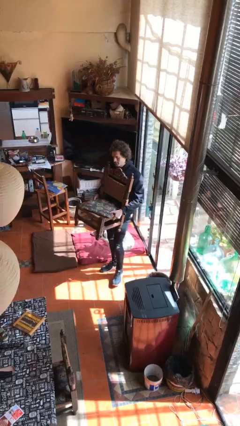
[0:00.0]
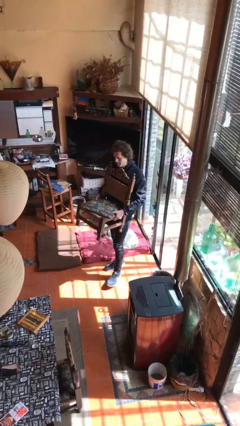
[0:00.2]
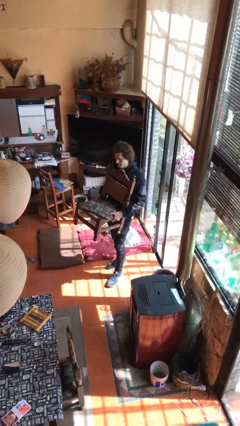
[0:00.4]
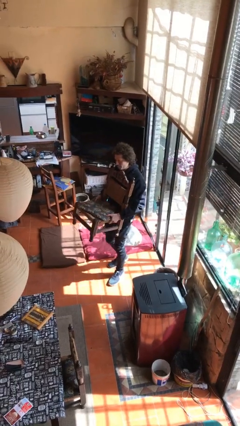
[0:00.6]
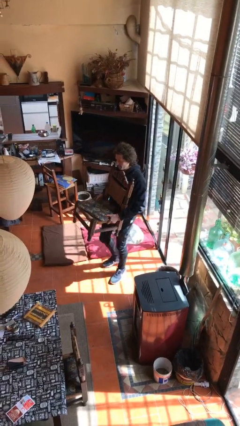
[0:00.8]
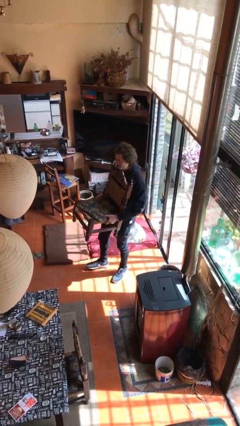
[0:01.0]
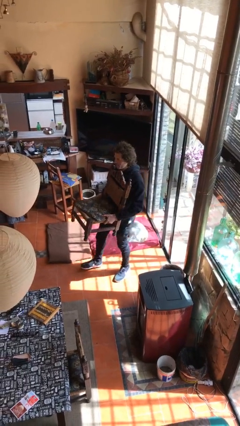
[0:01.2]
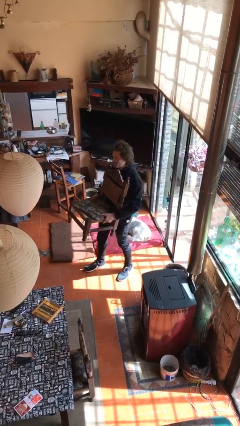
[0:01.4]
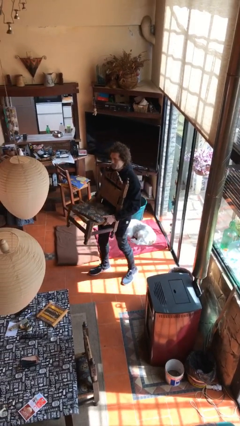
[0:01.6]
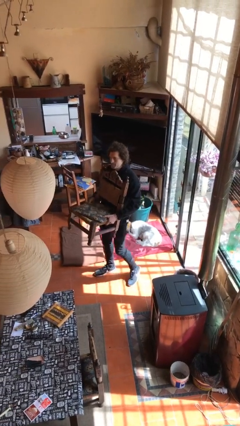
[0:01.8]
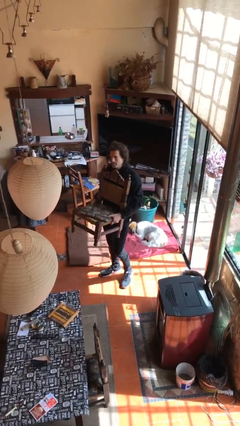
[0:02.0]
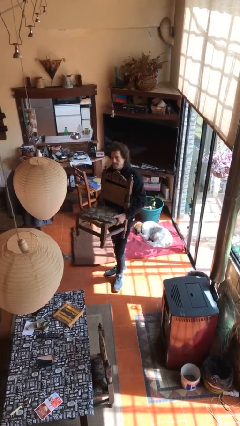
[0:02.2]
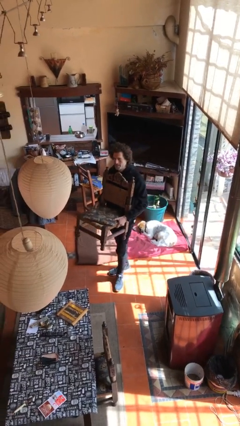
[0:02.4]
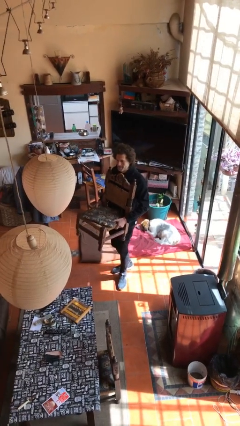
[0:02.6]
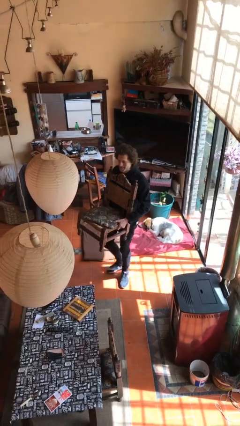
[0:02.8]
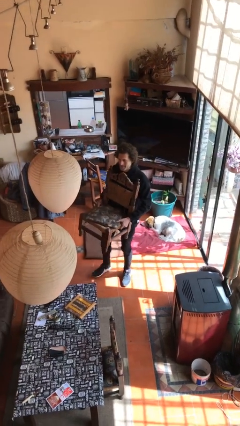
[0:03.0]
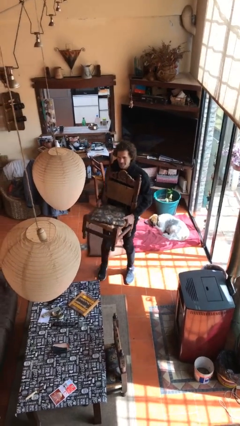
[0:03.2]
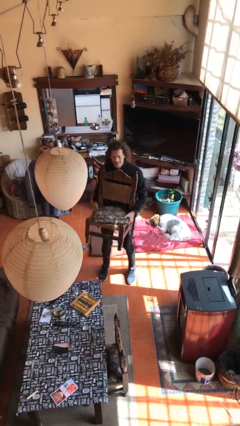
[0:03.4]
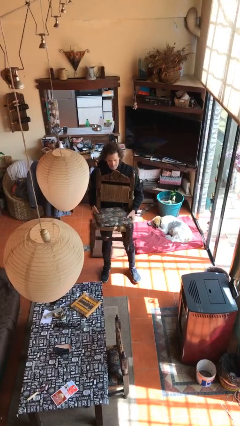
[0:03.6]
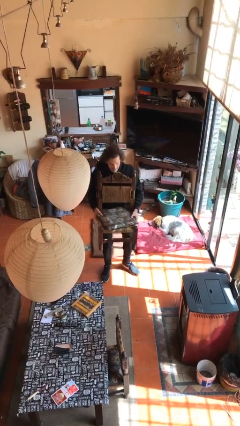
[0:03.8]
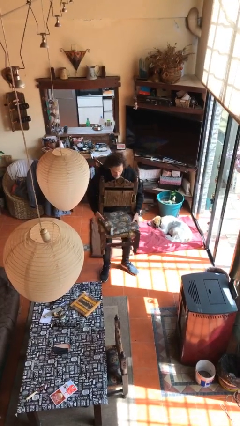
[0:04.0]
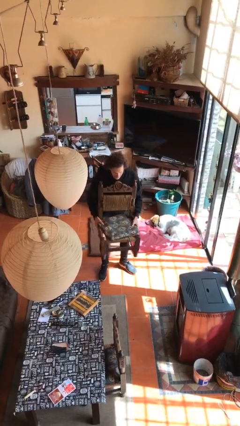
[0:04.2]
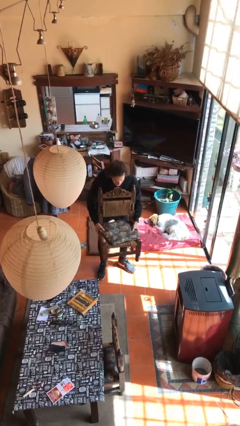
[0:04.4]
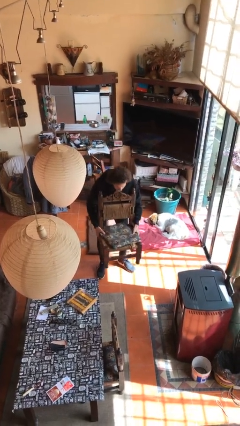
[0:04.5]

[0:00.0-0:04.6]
person carries heavy object

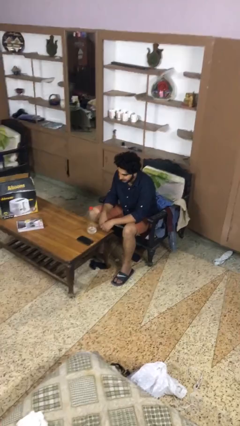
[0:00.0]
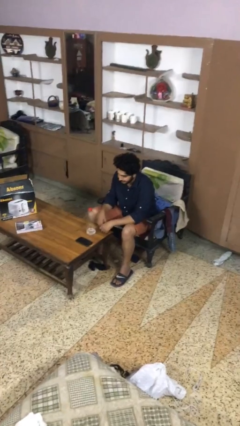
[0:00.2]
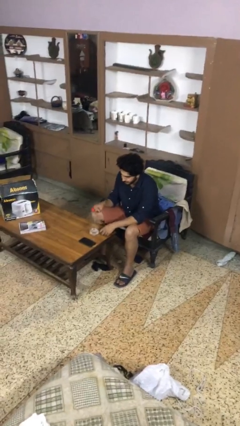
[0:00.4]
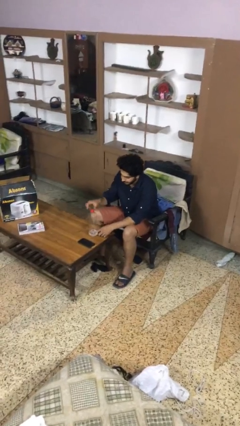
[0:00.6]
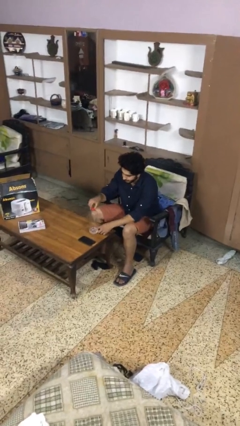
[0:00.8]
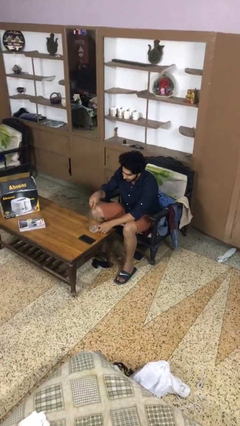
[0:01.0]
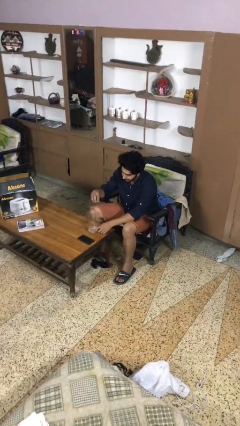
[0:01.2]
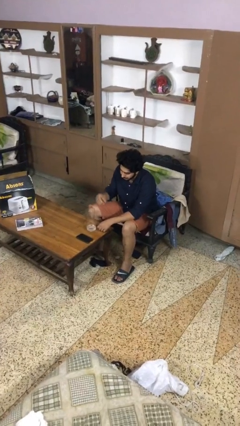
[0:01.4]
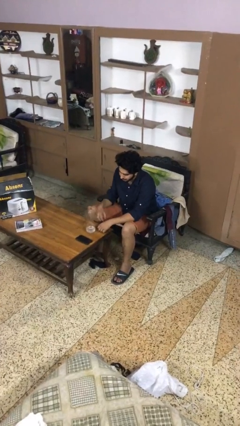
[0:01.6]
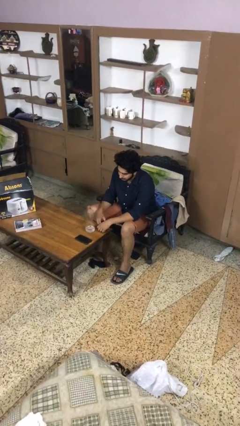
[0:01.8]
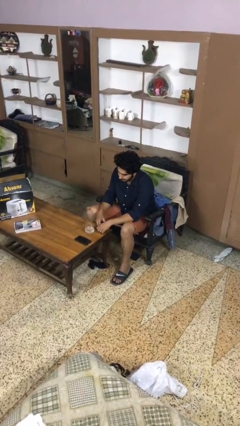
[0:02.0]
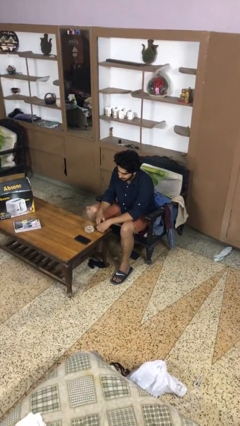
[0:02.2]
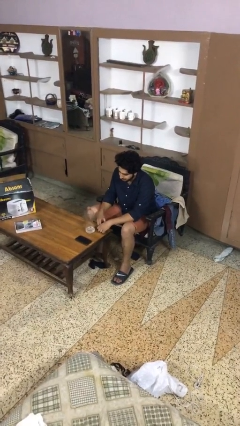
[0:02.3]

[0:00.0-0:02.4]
person unscrews lid from bottle

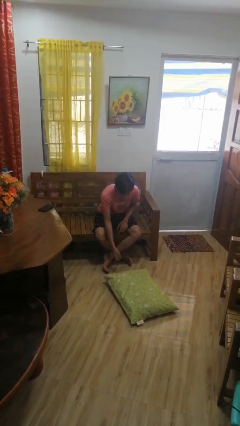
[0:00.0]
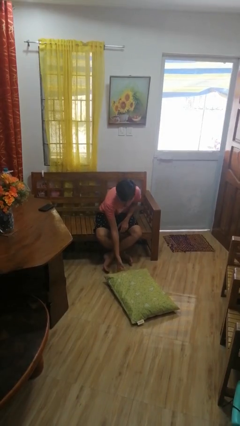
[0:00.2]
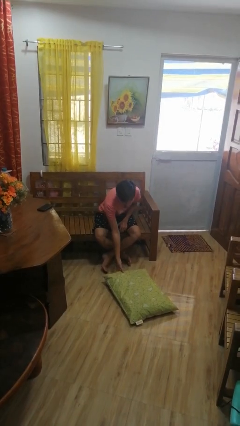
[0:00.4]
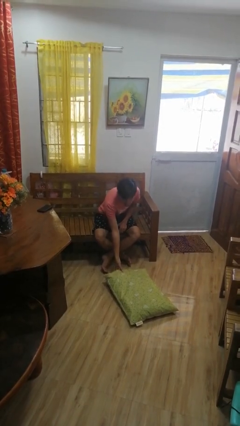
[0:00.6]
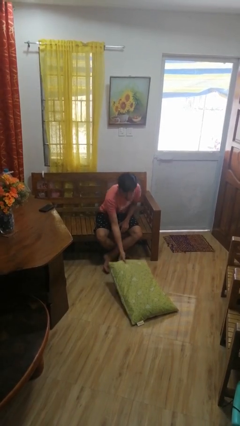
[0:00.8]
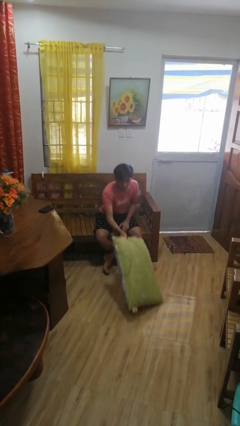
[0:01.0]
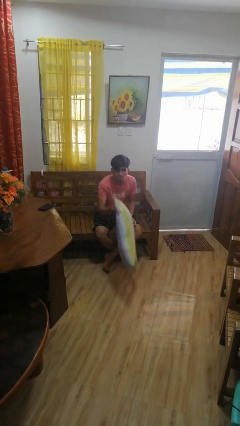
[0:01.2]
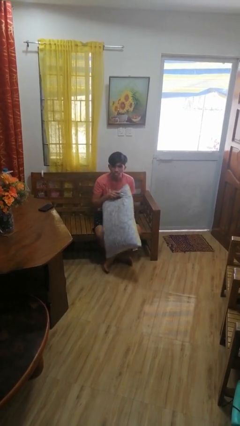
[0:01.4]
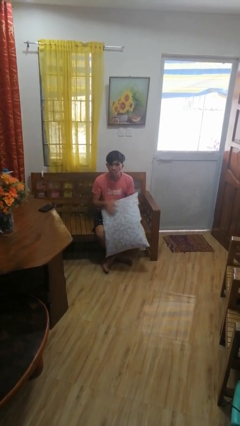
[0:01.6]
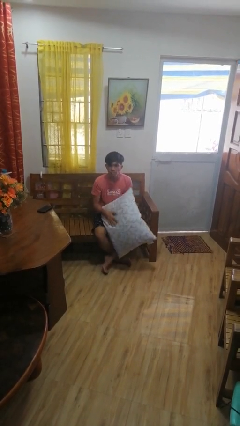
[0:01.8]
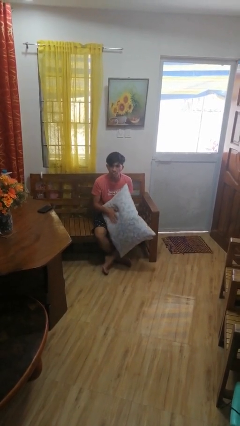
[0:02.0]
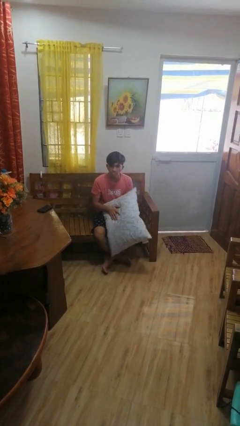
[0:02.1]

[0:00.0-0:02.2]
person picks up object from floor

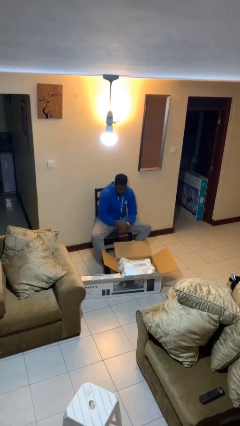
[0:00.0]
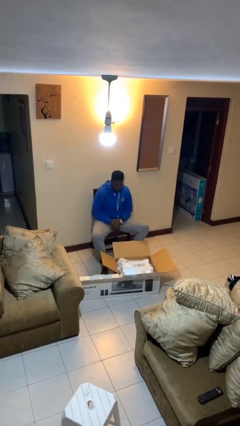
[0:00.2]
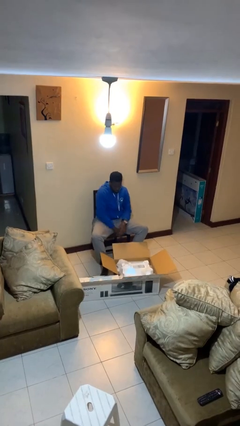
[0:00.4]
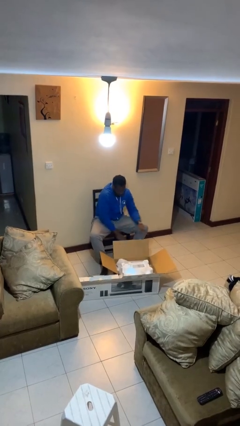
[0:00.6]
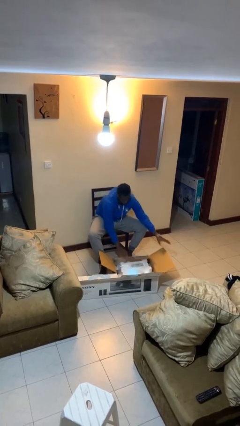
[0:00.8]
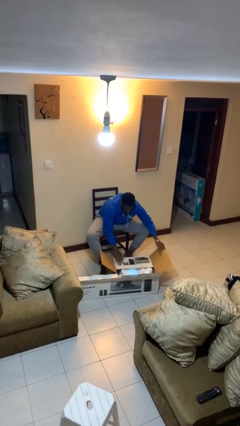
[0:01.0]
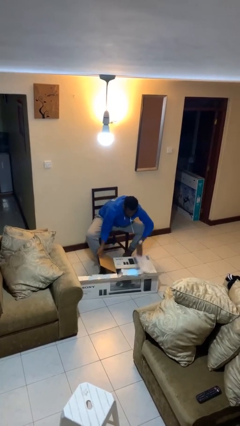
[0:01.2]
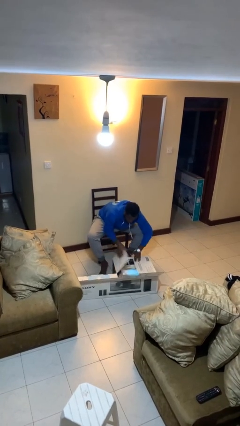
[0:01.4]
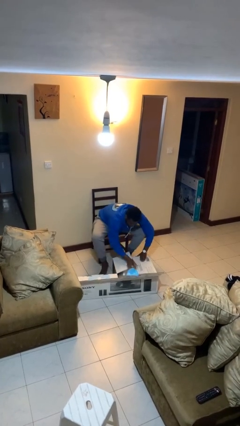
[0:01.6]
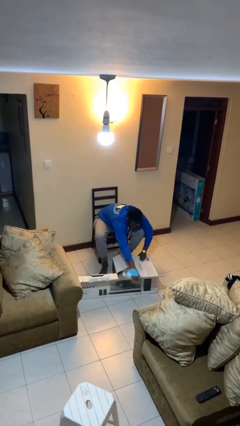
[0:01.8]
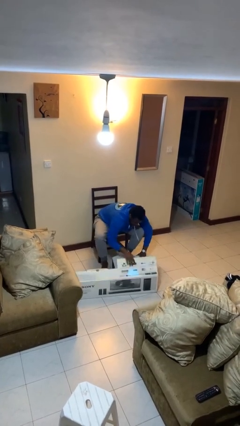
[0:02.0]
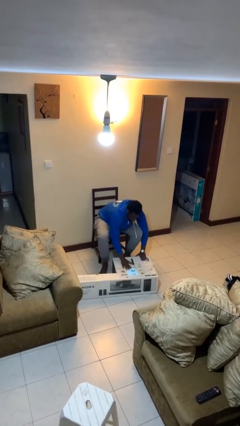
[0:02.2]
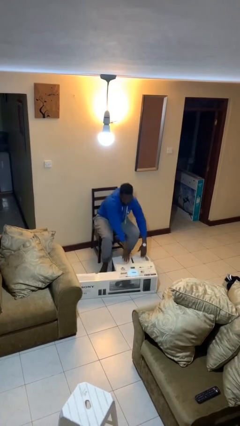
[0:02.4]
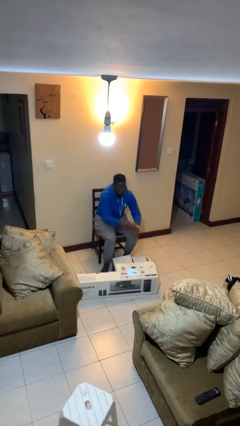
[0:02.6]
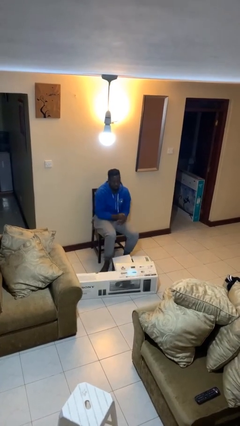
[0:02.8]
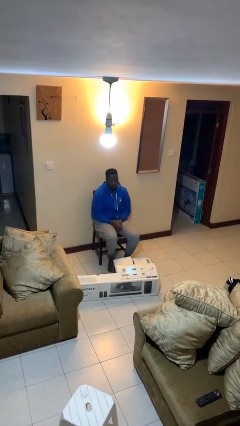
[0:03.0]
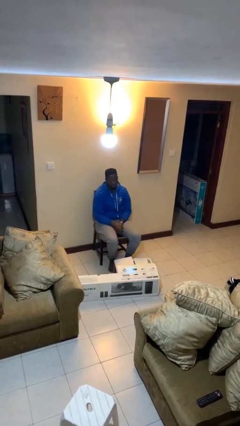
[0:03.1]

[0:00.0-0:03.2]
person closes box

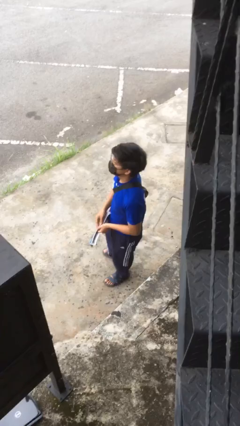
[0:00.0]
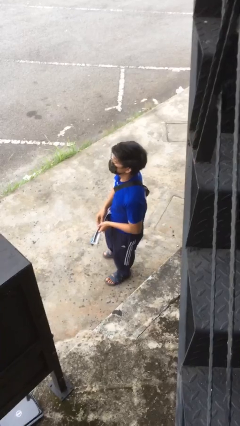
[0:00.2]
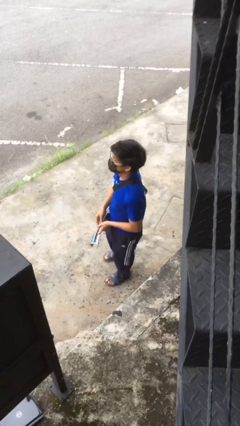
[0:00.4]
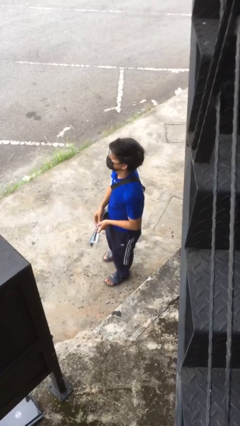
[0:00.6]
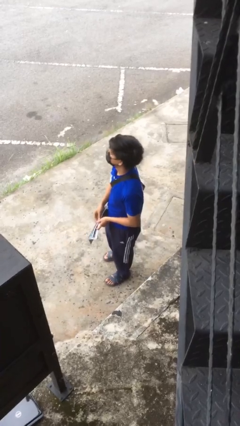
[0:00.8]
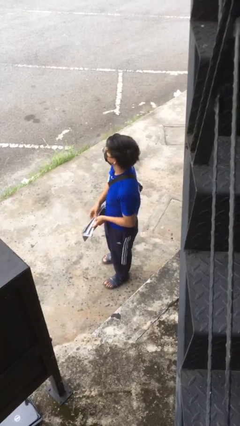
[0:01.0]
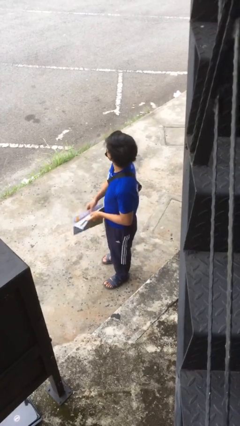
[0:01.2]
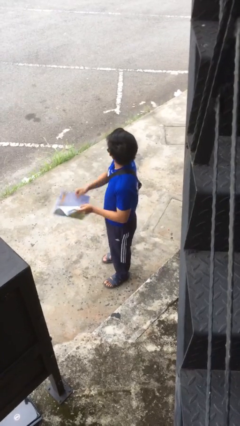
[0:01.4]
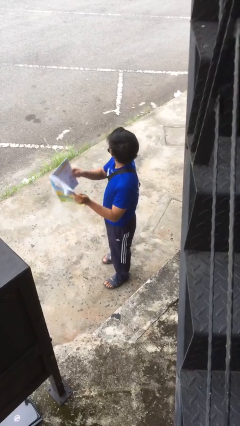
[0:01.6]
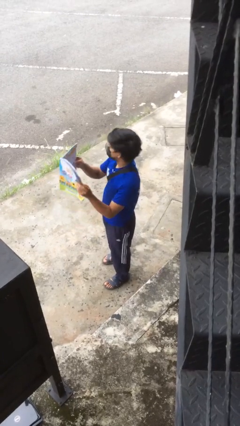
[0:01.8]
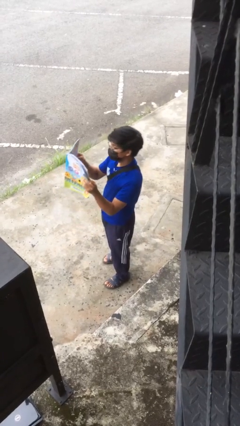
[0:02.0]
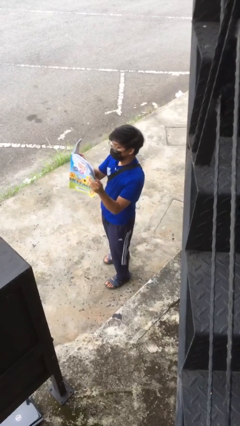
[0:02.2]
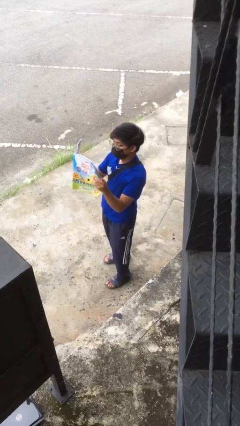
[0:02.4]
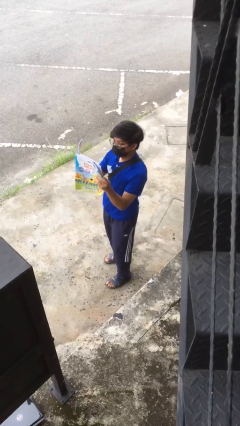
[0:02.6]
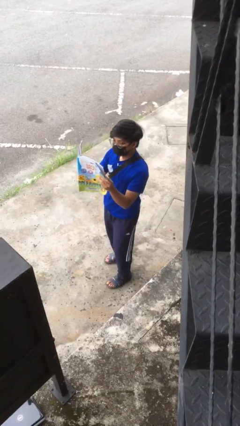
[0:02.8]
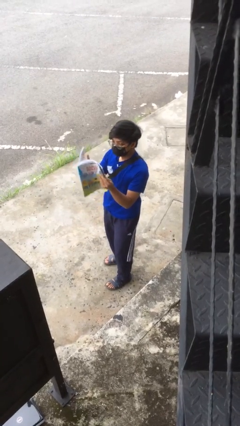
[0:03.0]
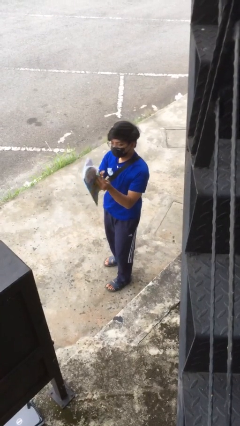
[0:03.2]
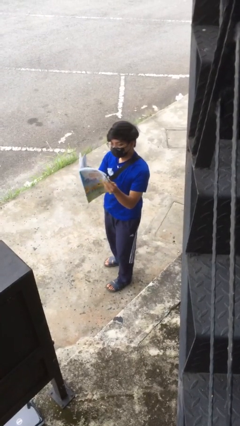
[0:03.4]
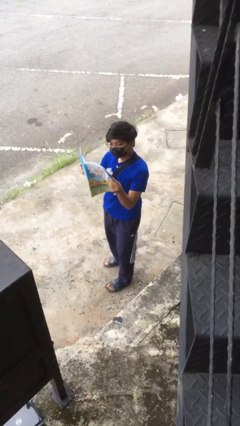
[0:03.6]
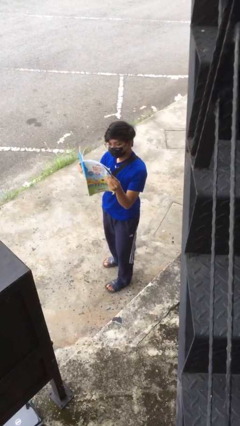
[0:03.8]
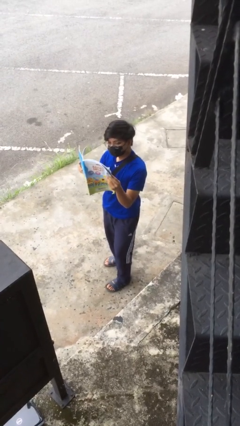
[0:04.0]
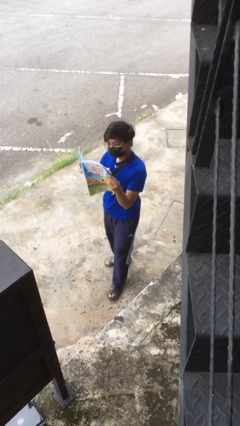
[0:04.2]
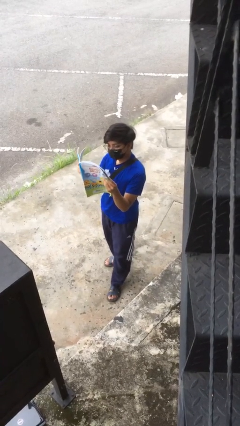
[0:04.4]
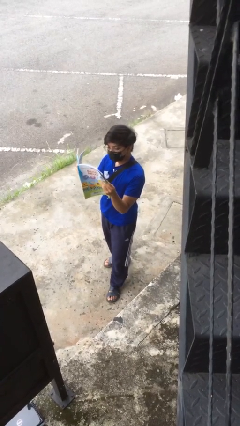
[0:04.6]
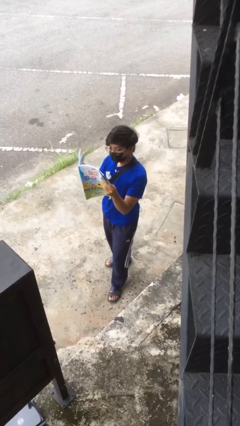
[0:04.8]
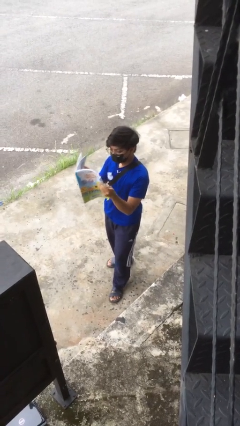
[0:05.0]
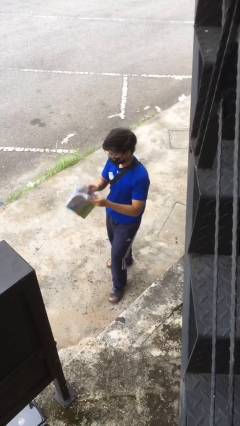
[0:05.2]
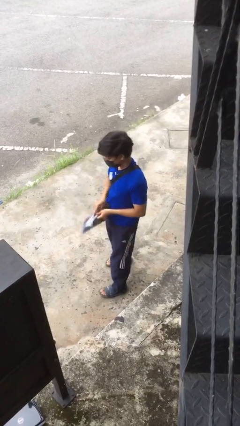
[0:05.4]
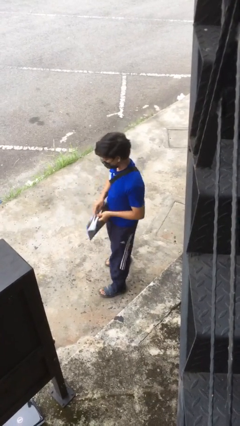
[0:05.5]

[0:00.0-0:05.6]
person reads document
